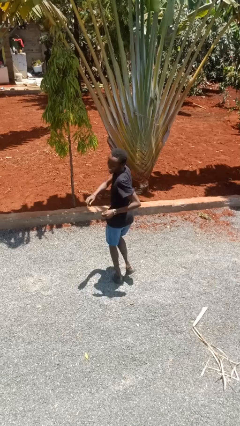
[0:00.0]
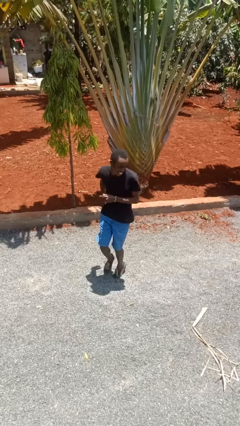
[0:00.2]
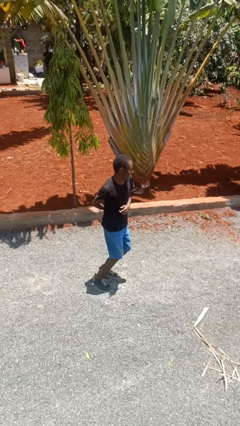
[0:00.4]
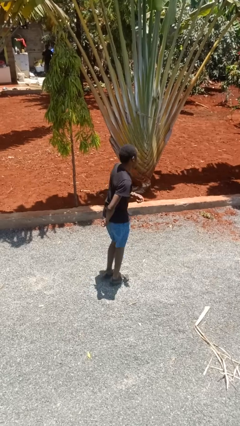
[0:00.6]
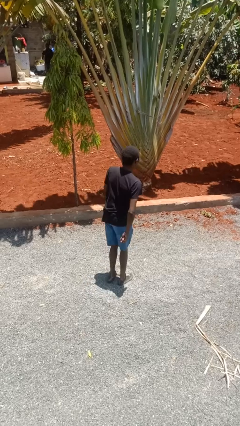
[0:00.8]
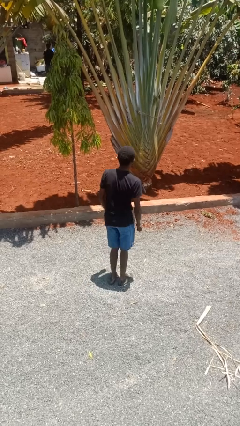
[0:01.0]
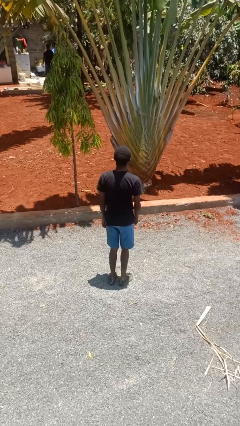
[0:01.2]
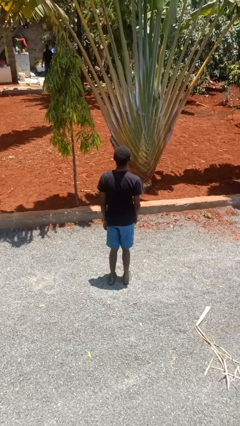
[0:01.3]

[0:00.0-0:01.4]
person twirls

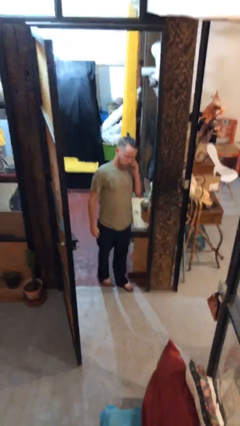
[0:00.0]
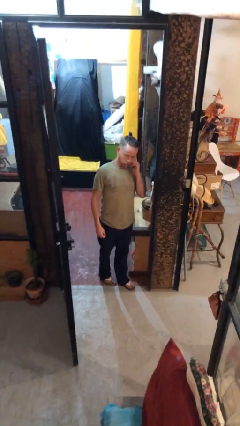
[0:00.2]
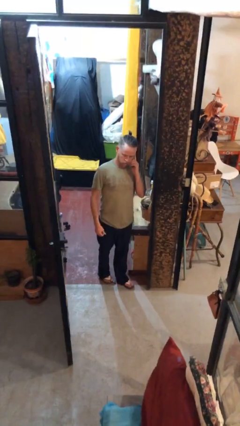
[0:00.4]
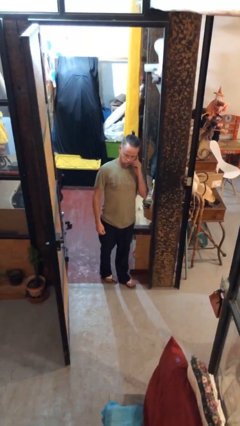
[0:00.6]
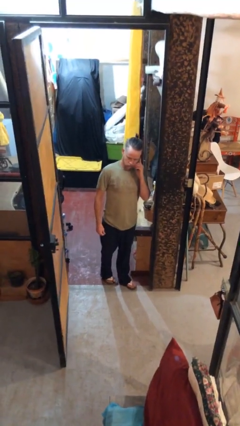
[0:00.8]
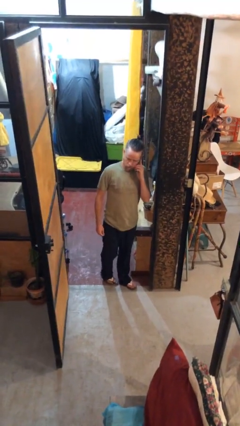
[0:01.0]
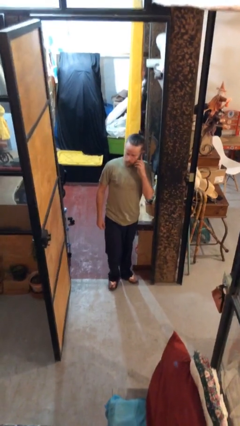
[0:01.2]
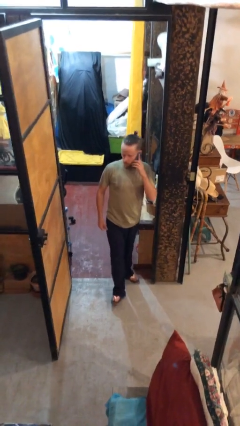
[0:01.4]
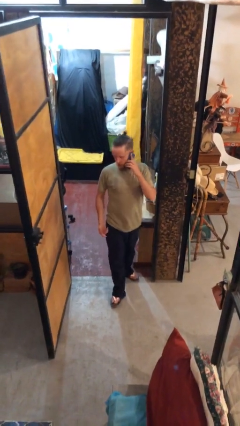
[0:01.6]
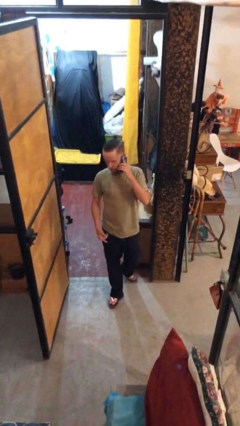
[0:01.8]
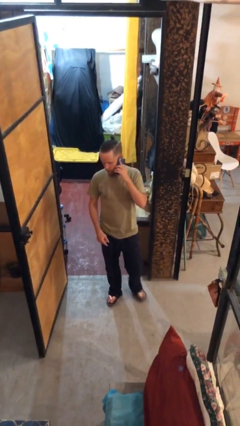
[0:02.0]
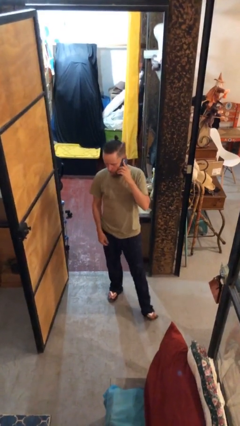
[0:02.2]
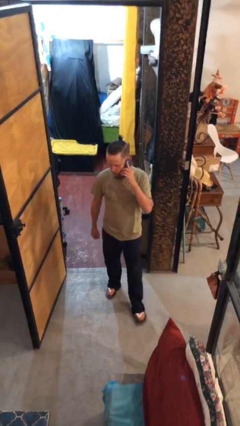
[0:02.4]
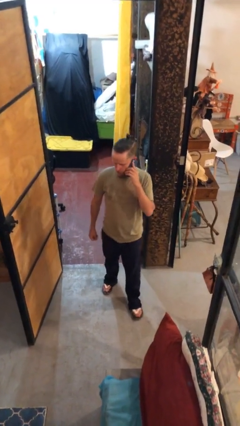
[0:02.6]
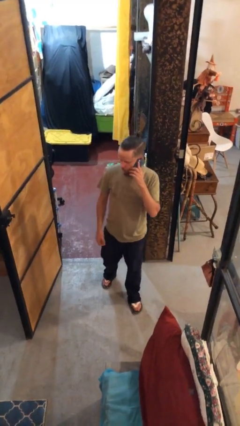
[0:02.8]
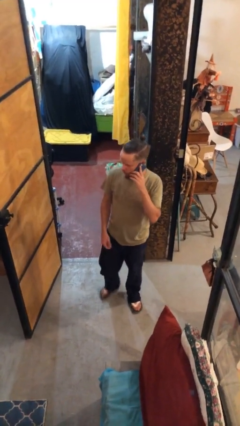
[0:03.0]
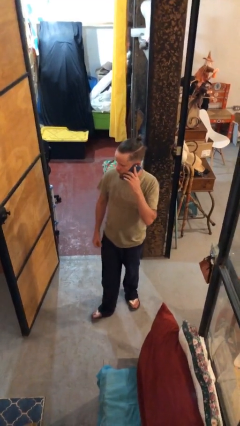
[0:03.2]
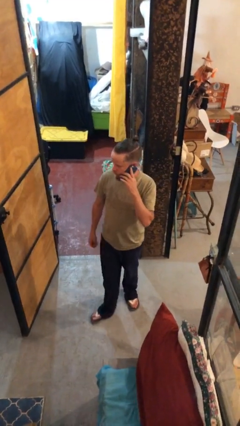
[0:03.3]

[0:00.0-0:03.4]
person enters scene through structure

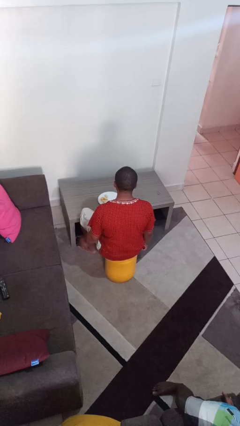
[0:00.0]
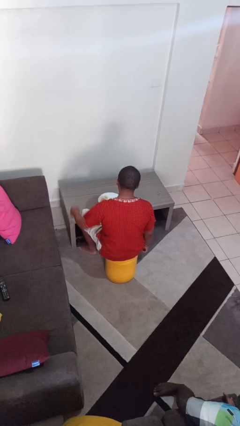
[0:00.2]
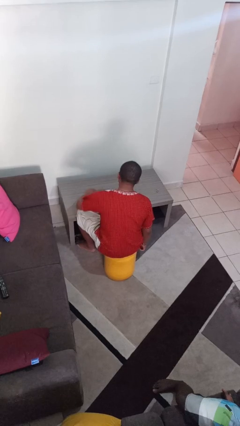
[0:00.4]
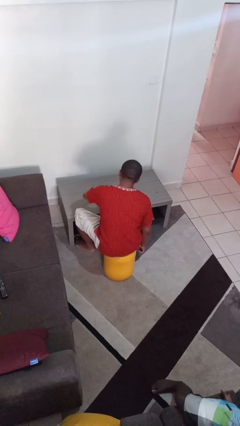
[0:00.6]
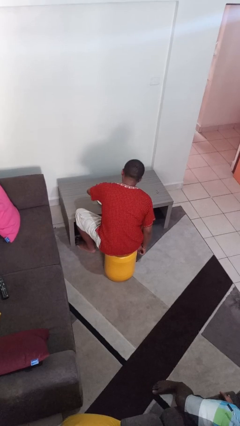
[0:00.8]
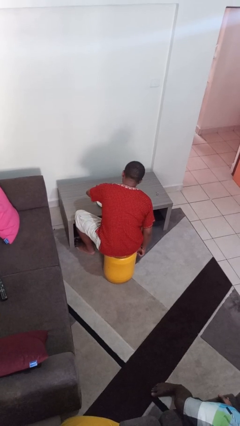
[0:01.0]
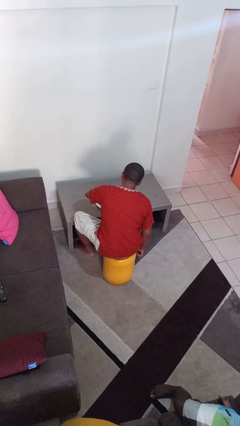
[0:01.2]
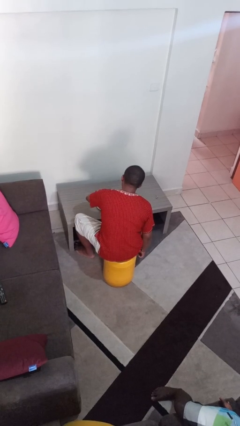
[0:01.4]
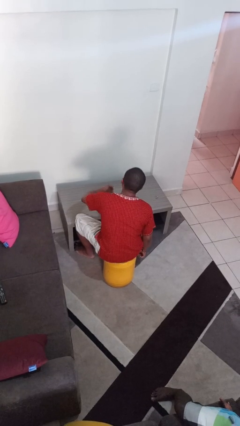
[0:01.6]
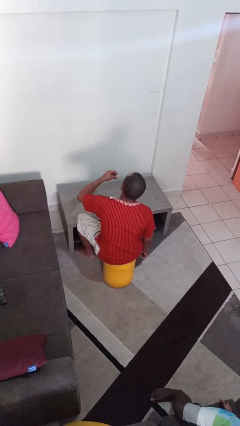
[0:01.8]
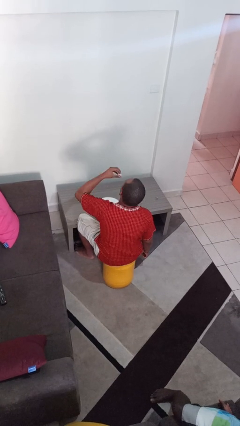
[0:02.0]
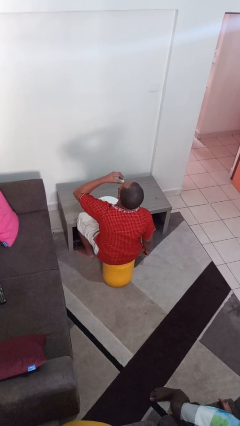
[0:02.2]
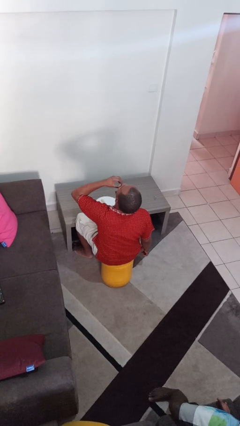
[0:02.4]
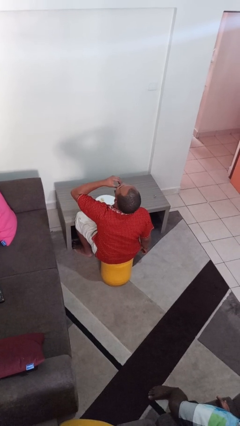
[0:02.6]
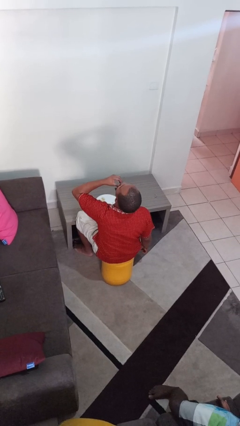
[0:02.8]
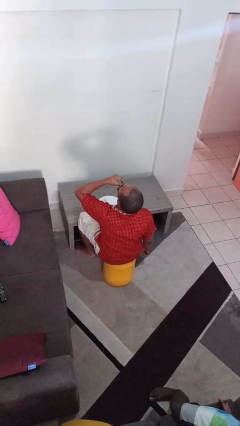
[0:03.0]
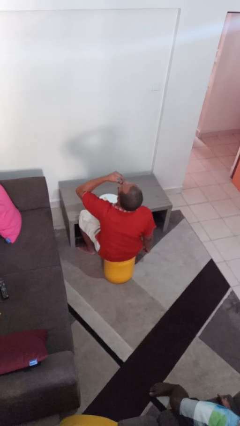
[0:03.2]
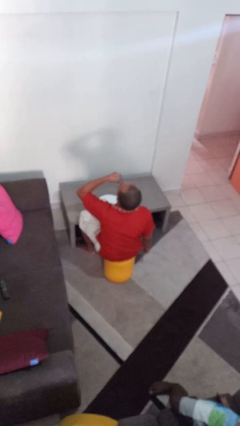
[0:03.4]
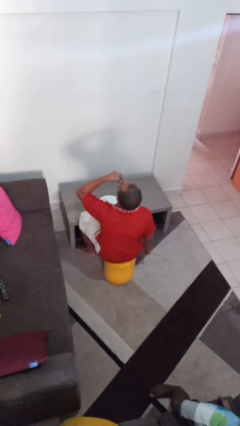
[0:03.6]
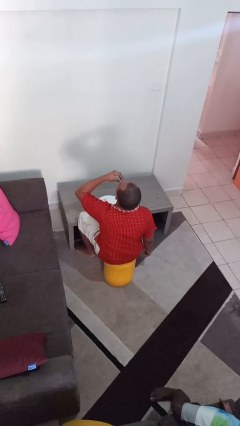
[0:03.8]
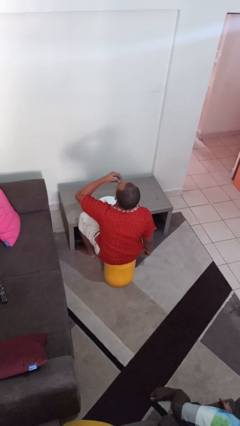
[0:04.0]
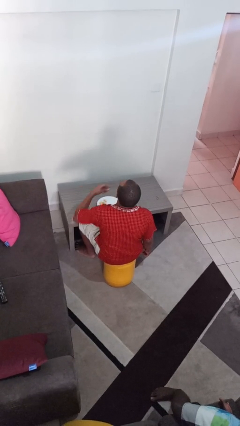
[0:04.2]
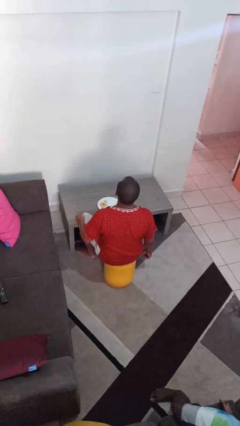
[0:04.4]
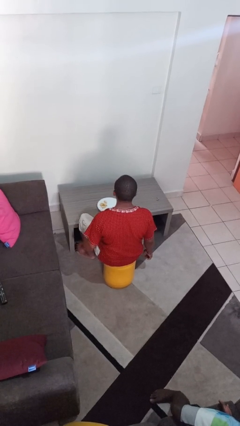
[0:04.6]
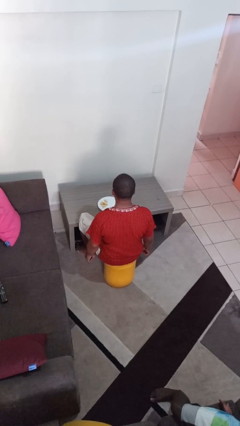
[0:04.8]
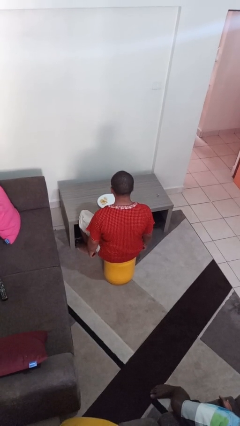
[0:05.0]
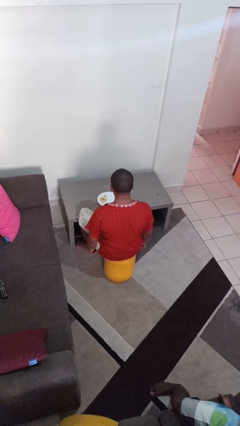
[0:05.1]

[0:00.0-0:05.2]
person eats with hands

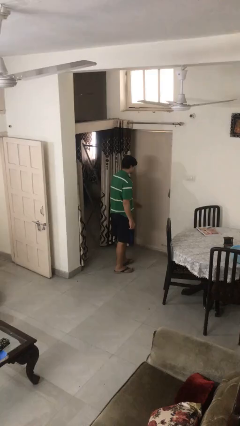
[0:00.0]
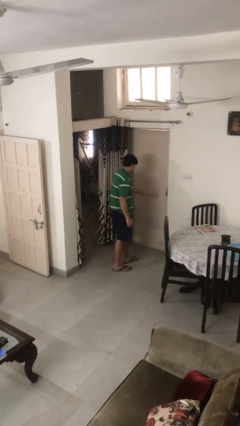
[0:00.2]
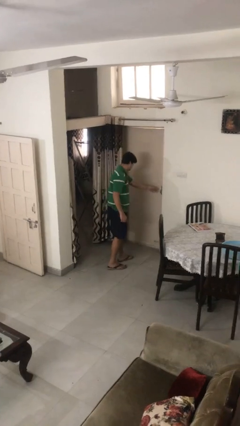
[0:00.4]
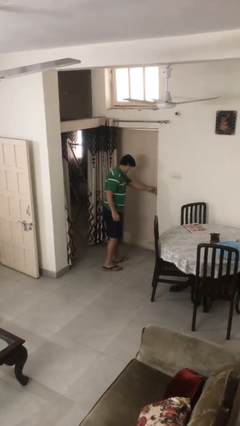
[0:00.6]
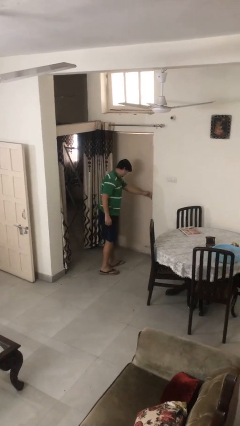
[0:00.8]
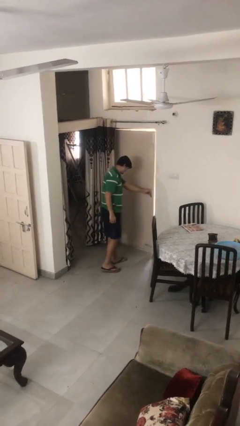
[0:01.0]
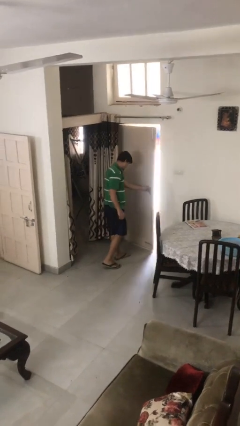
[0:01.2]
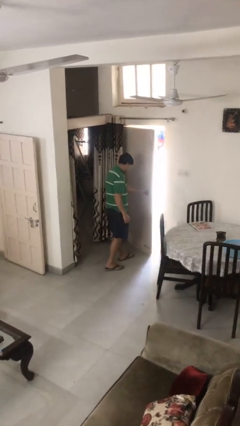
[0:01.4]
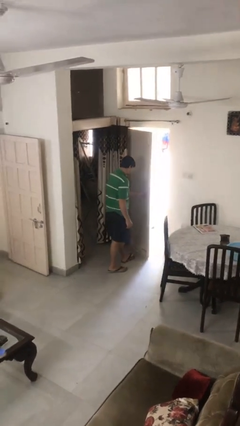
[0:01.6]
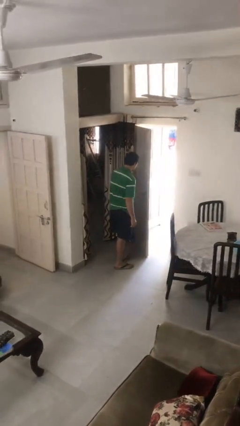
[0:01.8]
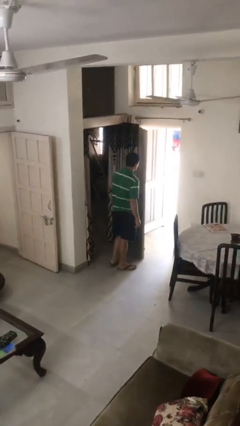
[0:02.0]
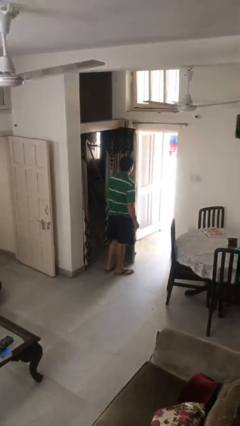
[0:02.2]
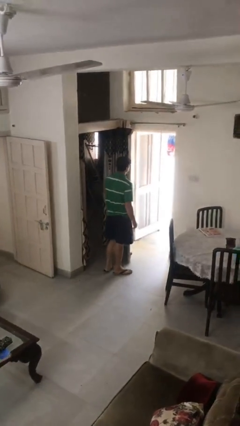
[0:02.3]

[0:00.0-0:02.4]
person opens facility door

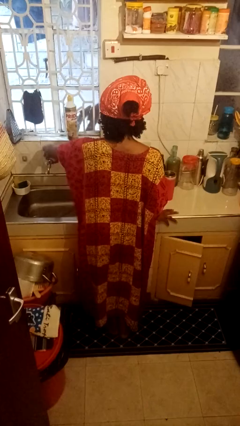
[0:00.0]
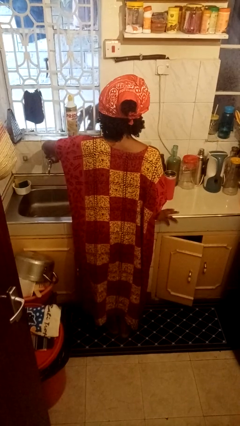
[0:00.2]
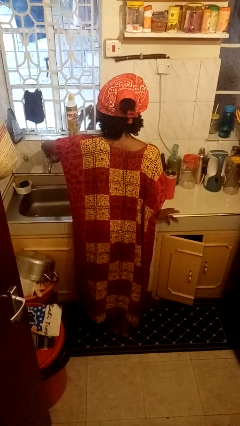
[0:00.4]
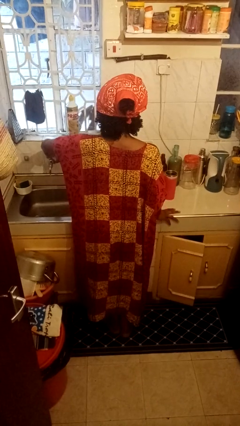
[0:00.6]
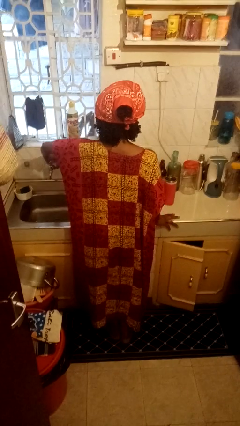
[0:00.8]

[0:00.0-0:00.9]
person turns off faucet

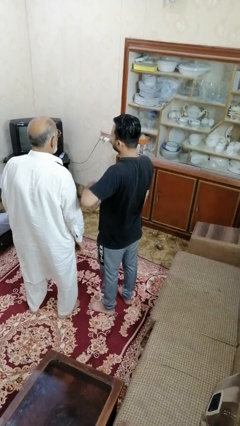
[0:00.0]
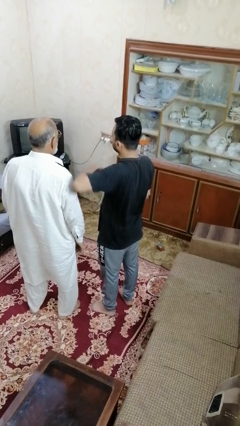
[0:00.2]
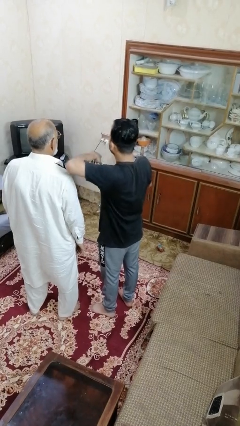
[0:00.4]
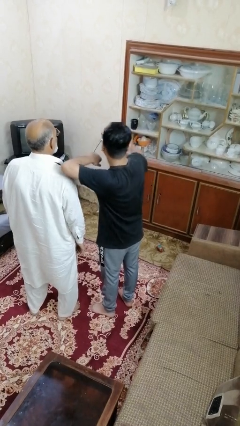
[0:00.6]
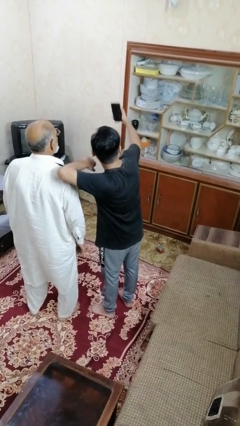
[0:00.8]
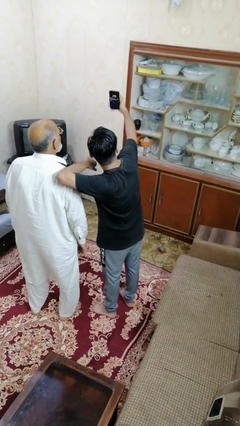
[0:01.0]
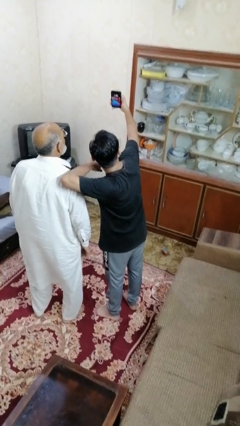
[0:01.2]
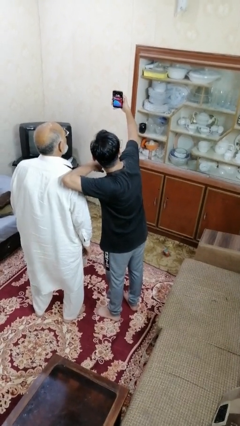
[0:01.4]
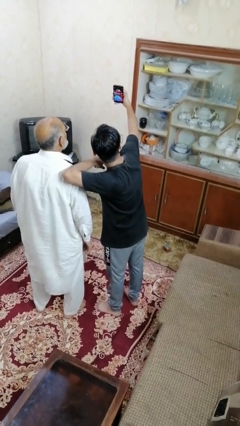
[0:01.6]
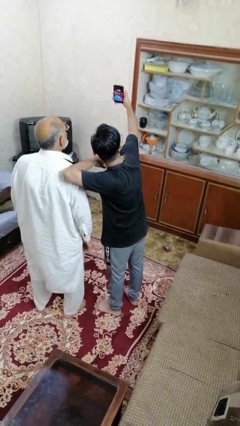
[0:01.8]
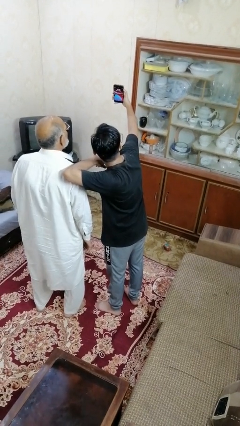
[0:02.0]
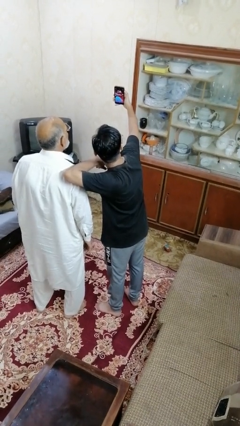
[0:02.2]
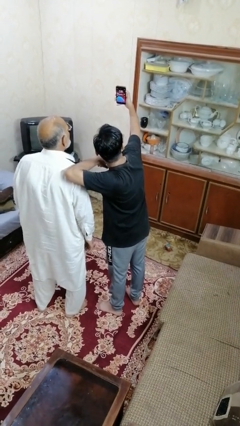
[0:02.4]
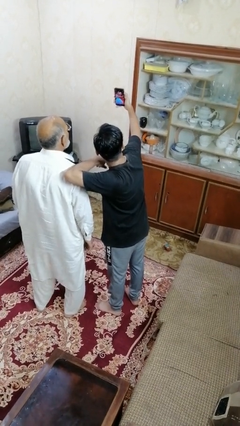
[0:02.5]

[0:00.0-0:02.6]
person takes selfie with person

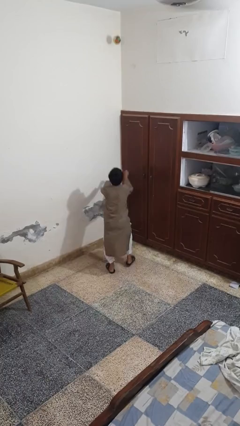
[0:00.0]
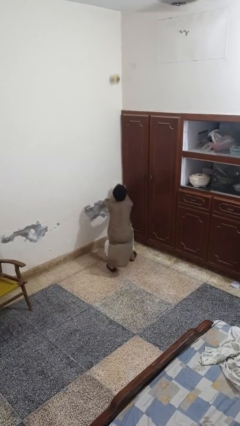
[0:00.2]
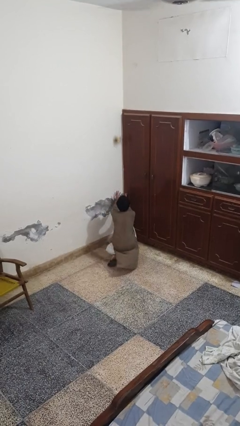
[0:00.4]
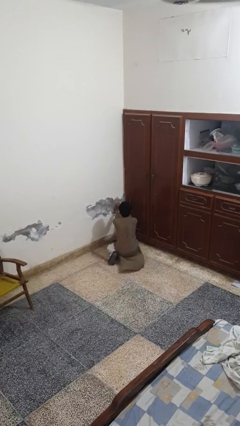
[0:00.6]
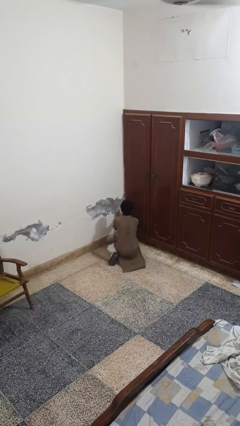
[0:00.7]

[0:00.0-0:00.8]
person catches dropped object
